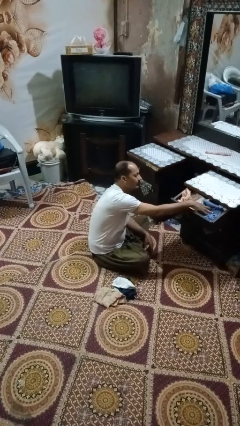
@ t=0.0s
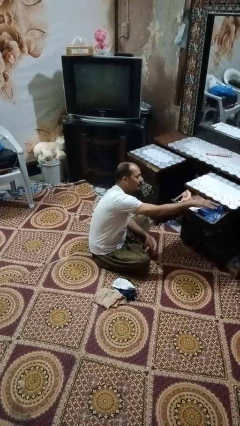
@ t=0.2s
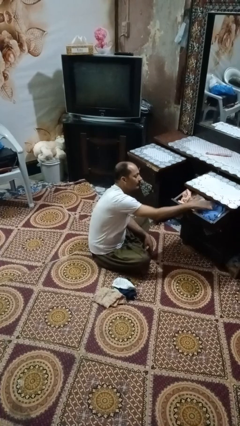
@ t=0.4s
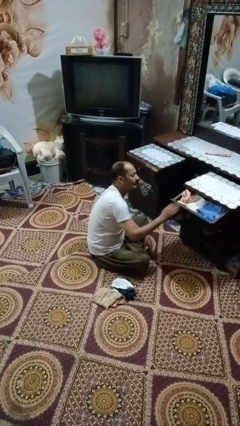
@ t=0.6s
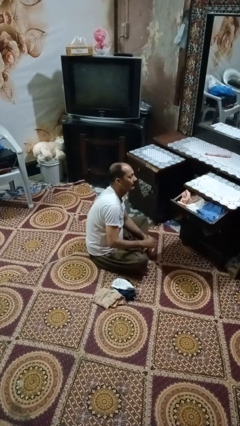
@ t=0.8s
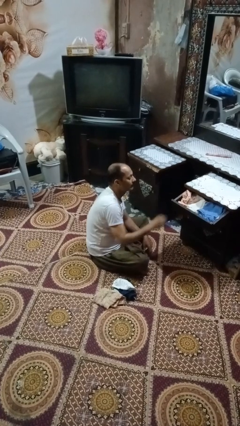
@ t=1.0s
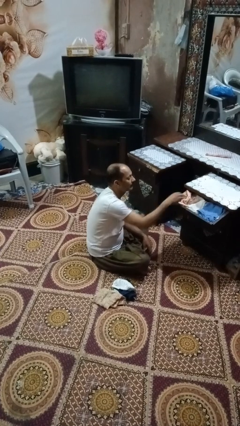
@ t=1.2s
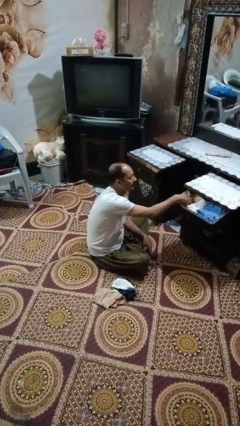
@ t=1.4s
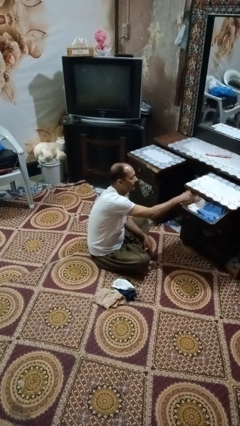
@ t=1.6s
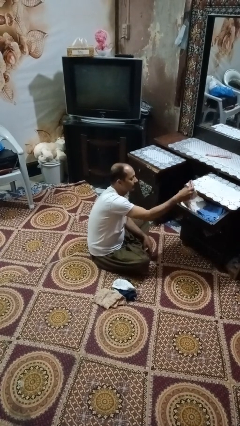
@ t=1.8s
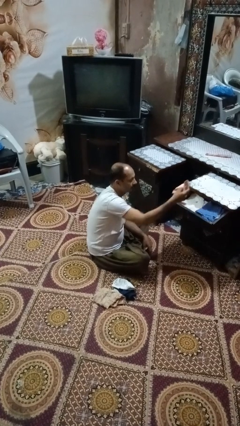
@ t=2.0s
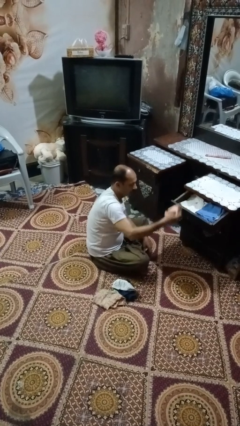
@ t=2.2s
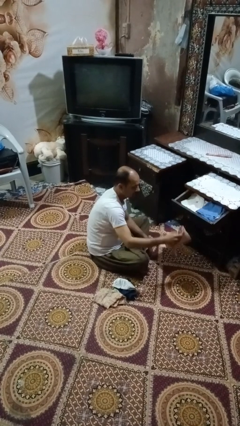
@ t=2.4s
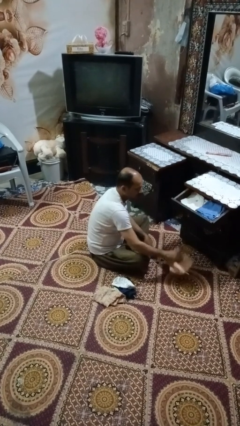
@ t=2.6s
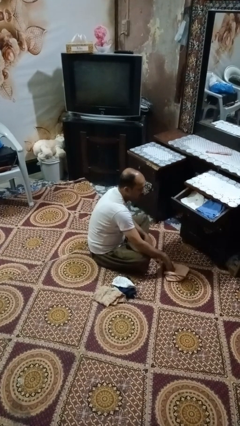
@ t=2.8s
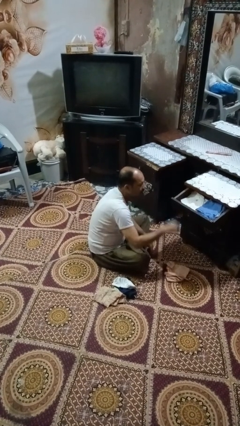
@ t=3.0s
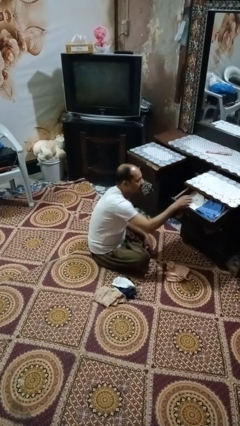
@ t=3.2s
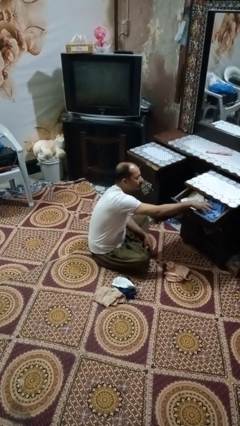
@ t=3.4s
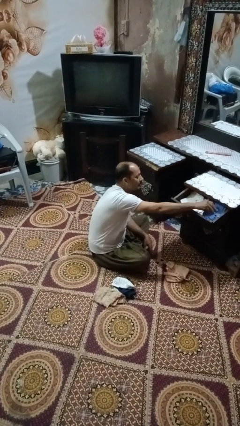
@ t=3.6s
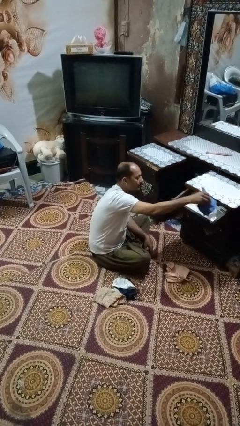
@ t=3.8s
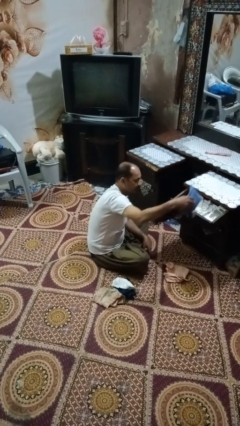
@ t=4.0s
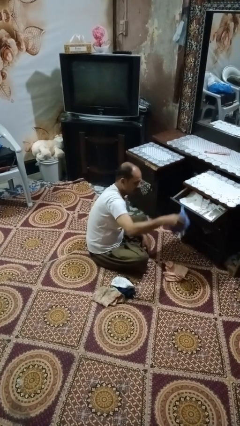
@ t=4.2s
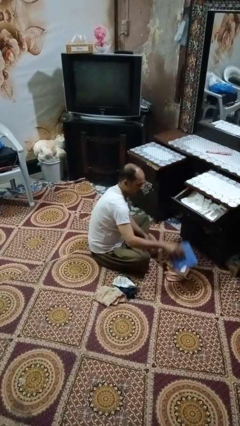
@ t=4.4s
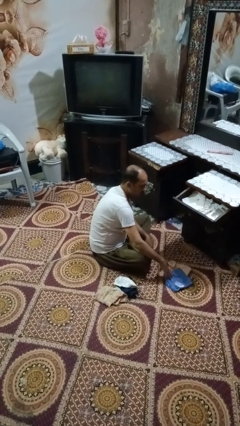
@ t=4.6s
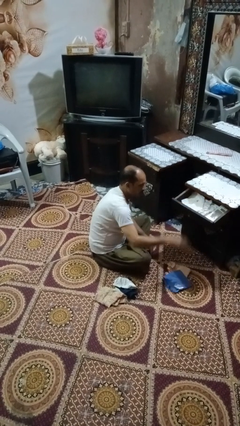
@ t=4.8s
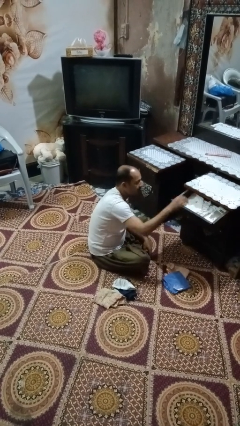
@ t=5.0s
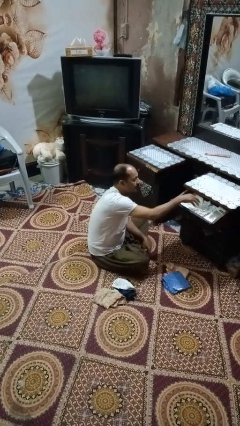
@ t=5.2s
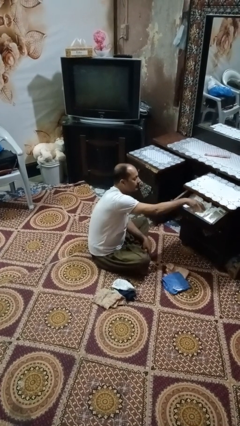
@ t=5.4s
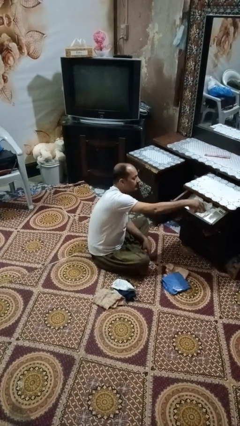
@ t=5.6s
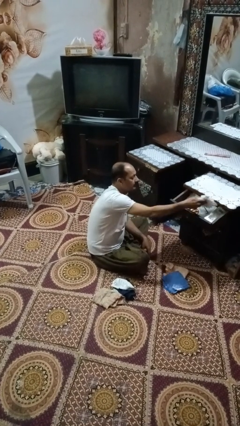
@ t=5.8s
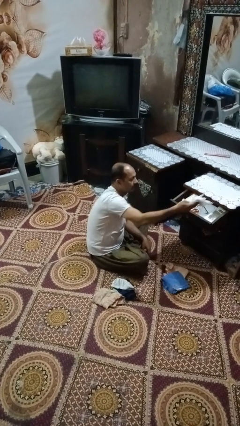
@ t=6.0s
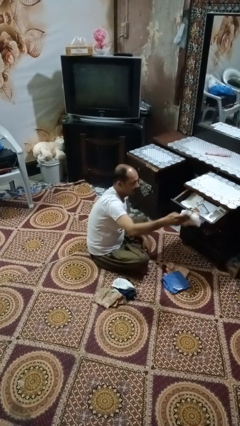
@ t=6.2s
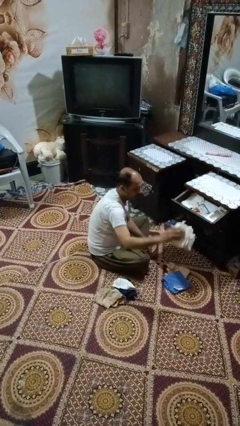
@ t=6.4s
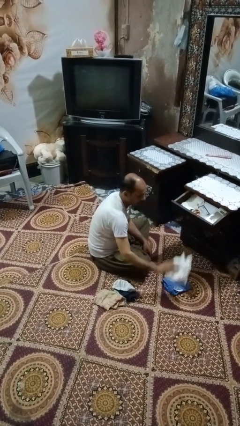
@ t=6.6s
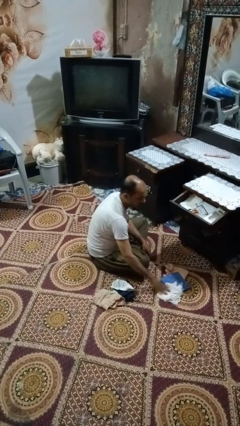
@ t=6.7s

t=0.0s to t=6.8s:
person takes clothes from dresser

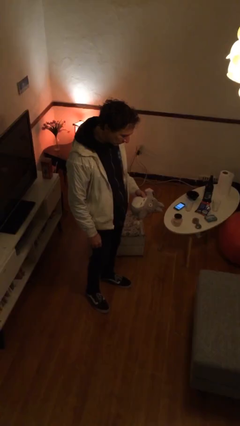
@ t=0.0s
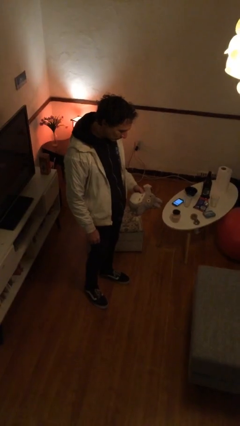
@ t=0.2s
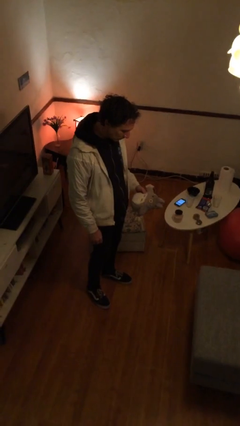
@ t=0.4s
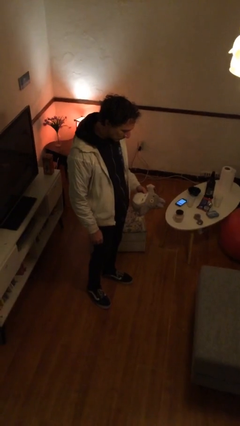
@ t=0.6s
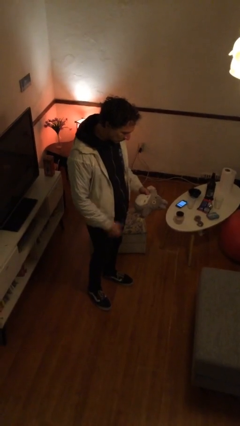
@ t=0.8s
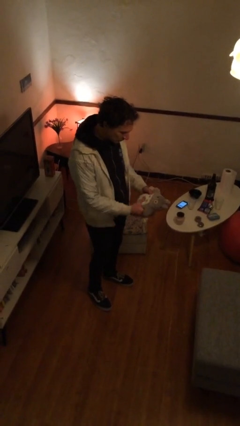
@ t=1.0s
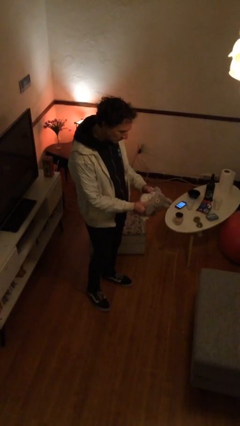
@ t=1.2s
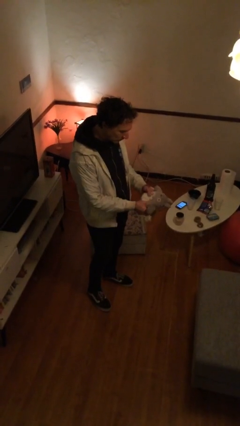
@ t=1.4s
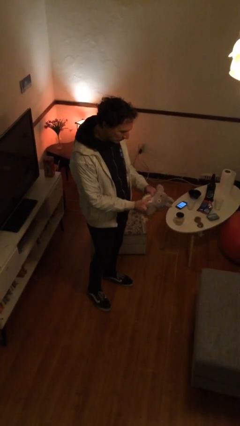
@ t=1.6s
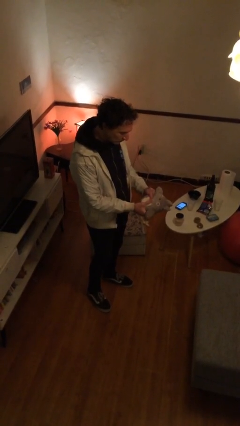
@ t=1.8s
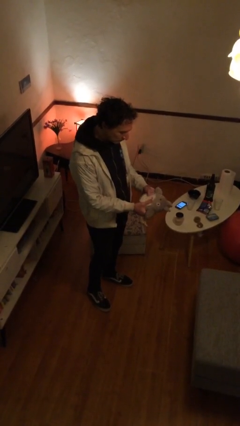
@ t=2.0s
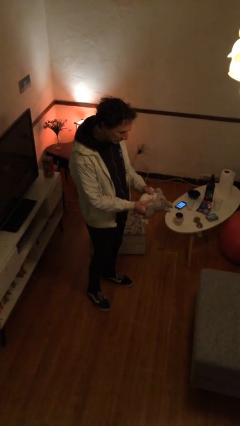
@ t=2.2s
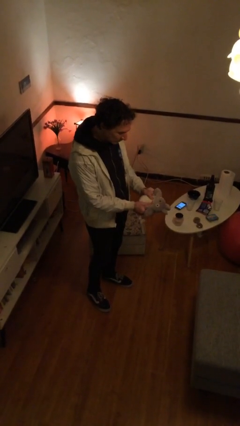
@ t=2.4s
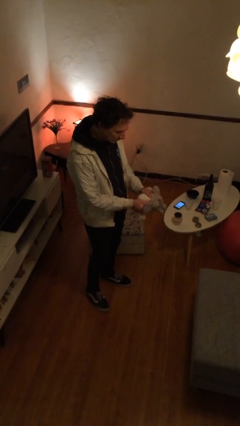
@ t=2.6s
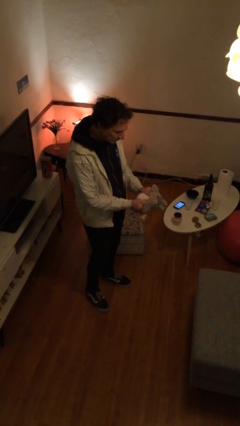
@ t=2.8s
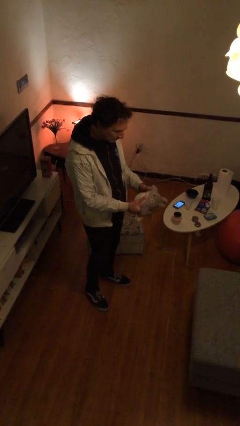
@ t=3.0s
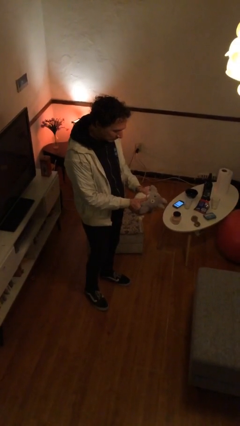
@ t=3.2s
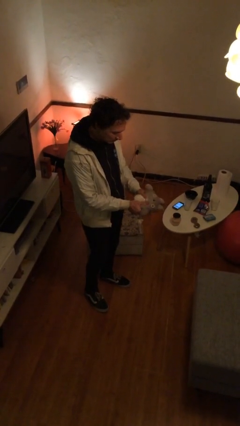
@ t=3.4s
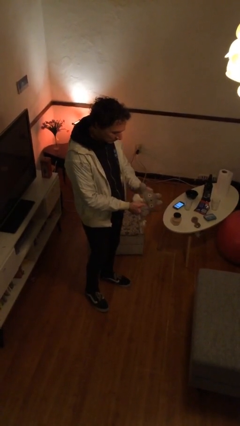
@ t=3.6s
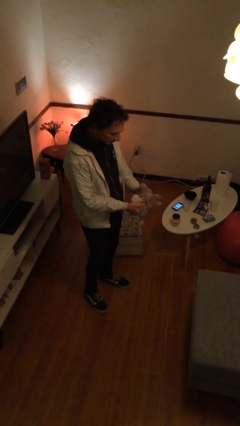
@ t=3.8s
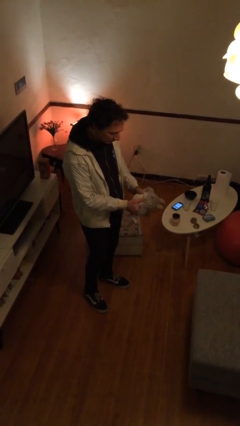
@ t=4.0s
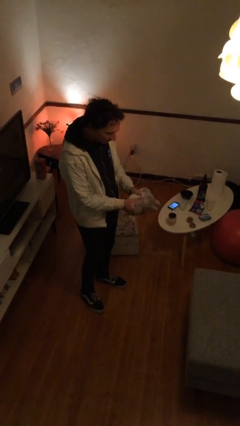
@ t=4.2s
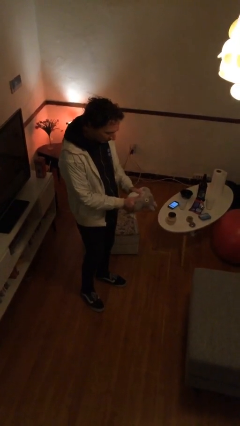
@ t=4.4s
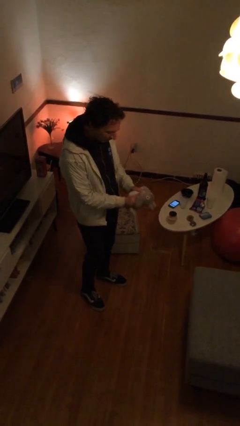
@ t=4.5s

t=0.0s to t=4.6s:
person squeezes object

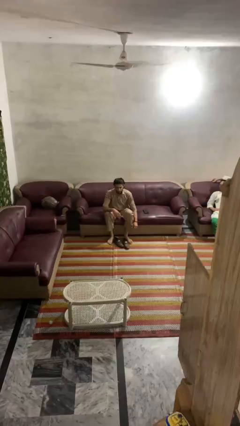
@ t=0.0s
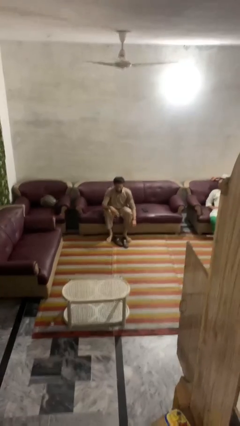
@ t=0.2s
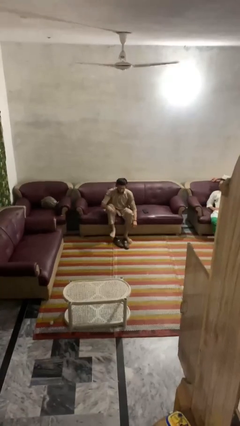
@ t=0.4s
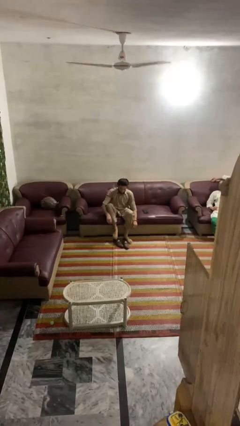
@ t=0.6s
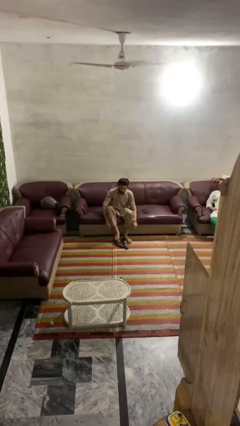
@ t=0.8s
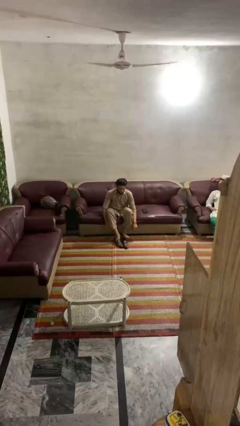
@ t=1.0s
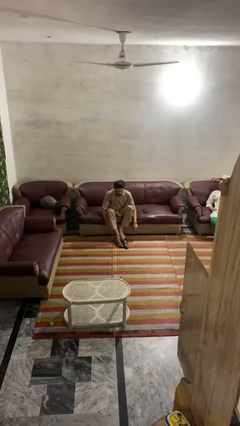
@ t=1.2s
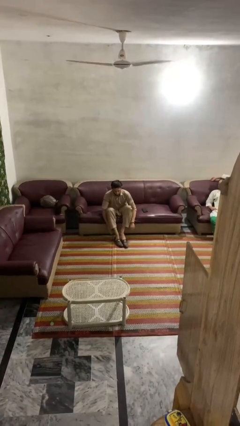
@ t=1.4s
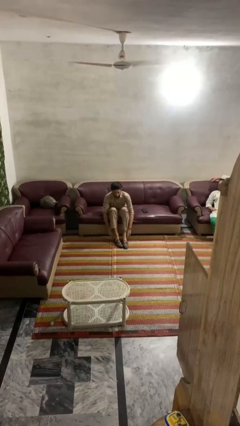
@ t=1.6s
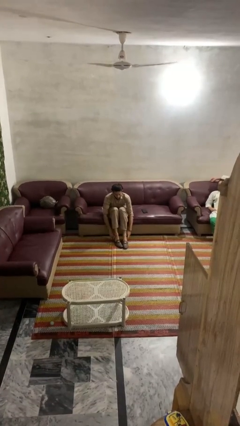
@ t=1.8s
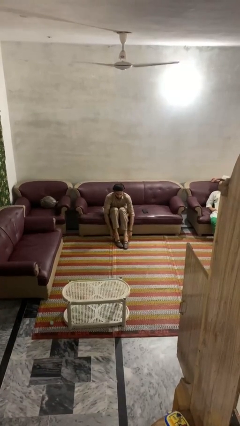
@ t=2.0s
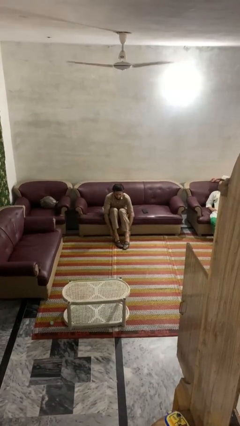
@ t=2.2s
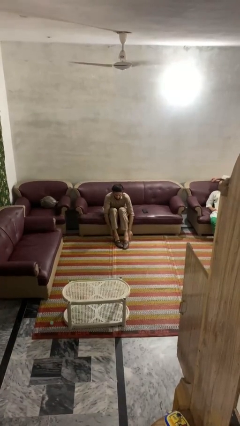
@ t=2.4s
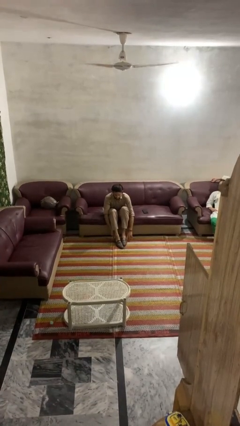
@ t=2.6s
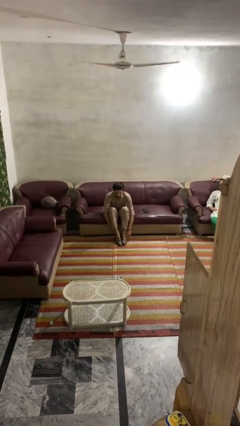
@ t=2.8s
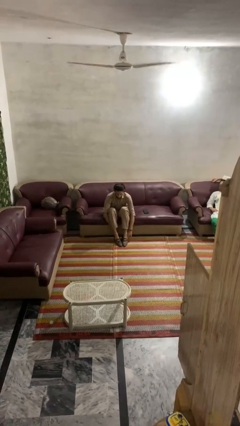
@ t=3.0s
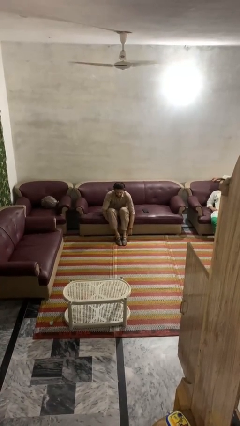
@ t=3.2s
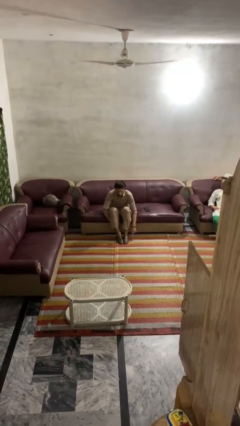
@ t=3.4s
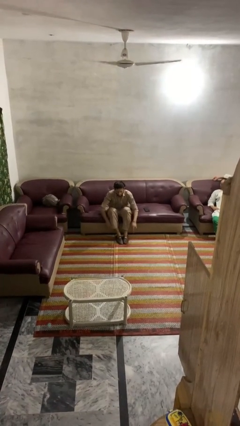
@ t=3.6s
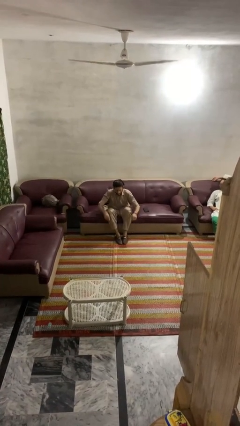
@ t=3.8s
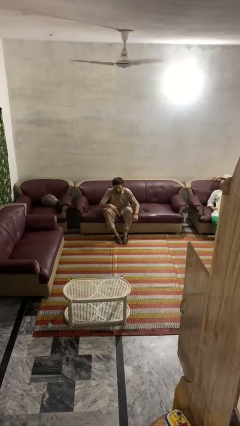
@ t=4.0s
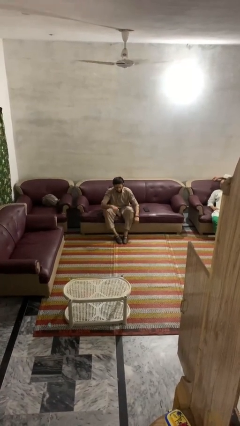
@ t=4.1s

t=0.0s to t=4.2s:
person puts on shoes

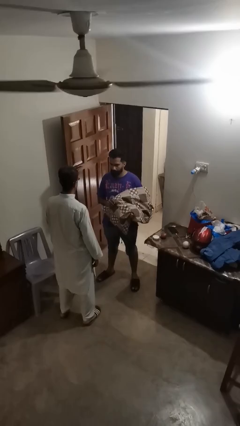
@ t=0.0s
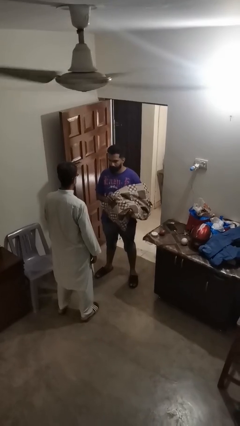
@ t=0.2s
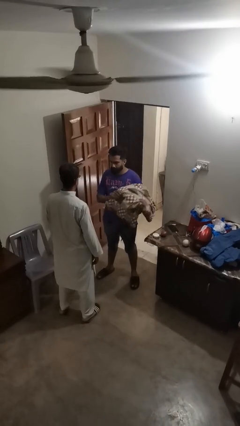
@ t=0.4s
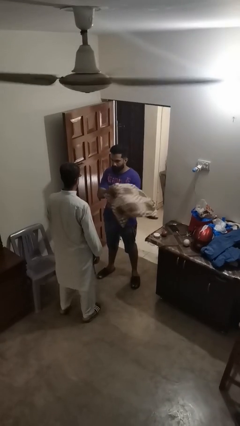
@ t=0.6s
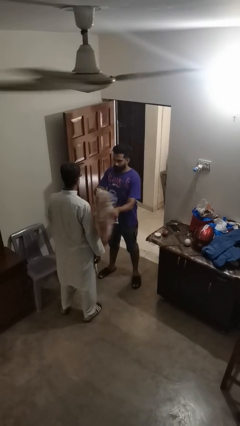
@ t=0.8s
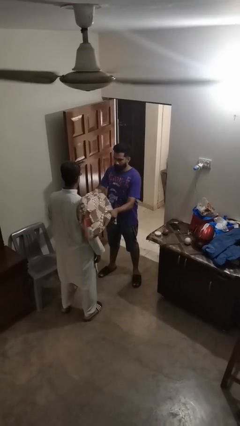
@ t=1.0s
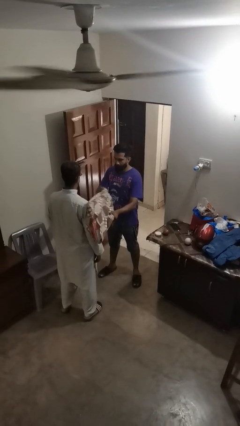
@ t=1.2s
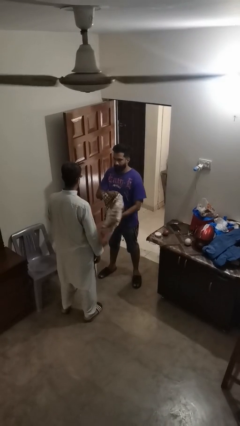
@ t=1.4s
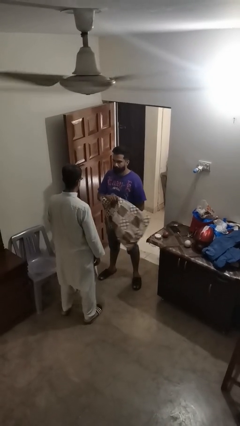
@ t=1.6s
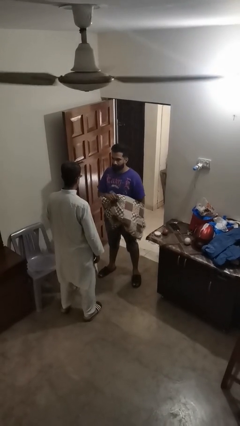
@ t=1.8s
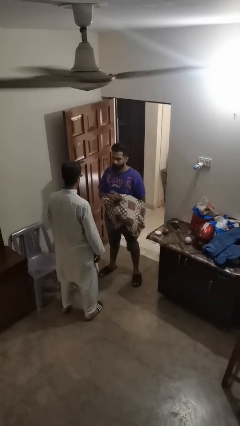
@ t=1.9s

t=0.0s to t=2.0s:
person hits person with pillow
